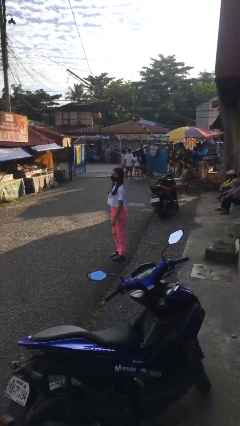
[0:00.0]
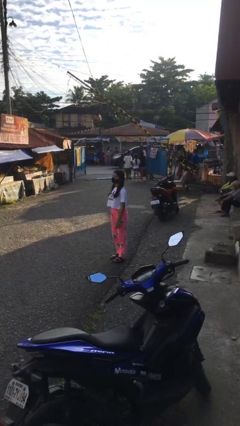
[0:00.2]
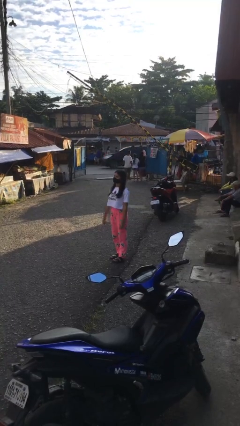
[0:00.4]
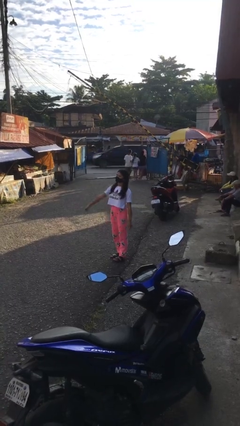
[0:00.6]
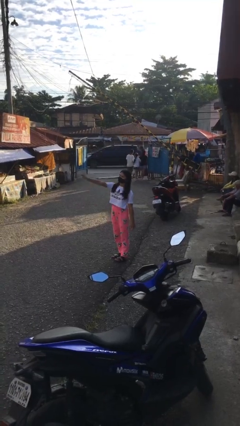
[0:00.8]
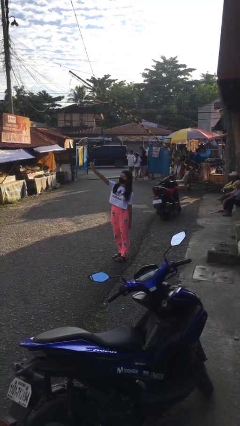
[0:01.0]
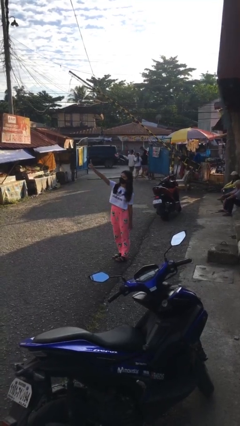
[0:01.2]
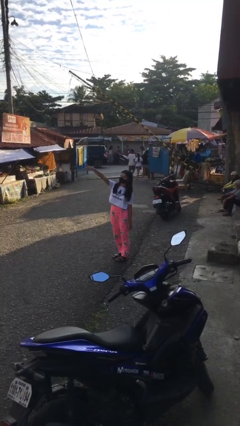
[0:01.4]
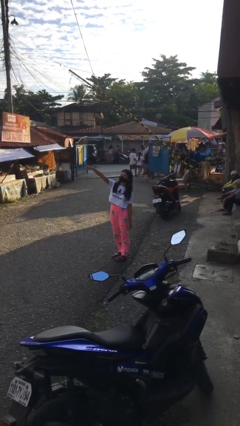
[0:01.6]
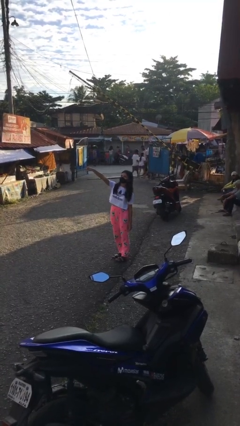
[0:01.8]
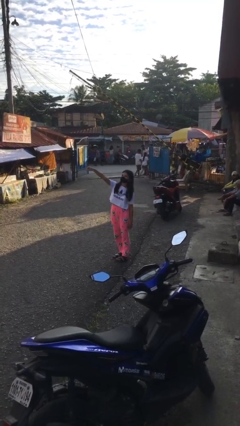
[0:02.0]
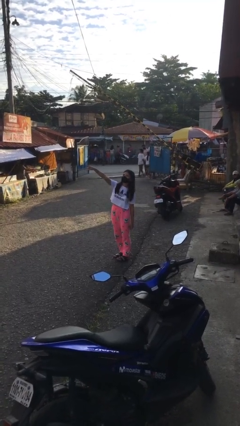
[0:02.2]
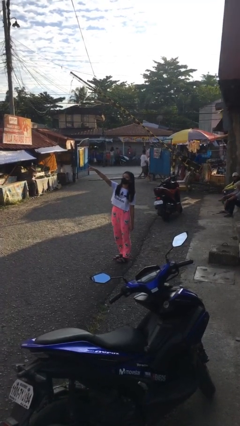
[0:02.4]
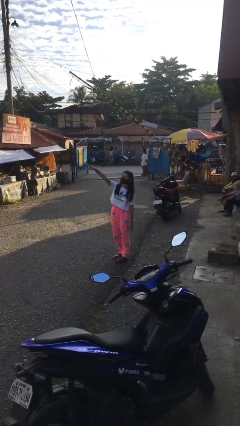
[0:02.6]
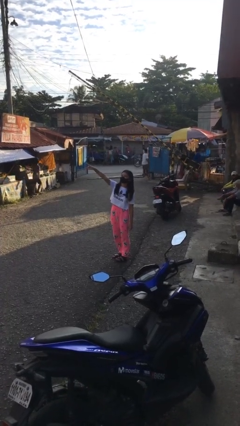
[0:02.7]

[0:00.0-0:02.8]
person points at person

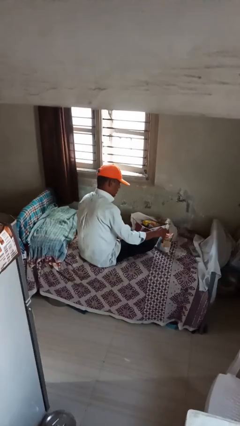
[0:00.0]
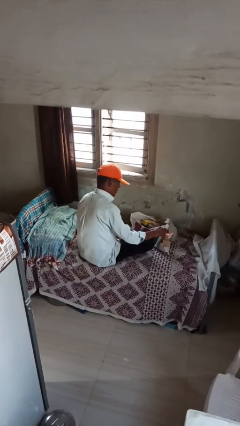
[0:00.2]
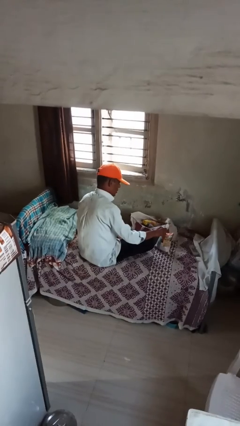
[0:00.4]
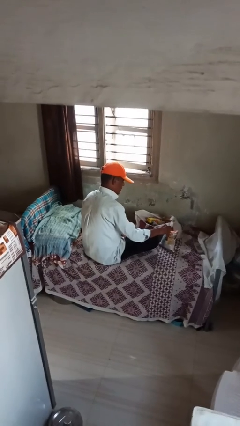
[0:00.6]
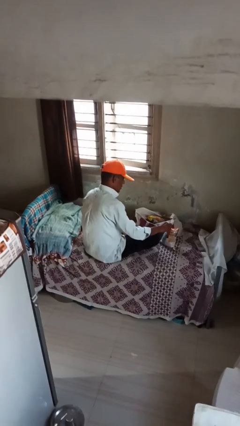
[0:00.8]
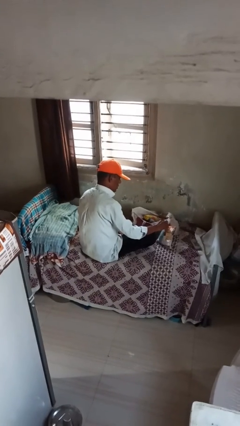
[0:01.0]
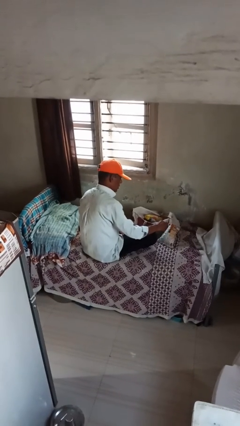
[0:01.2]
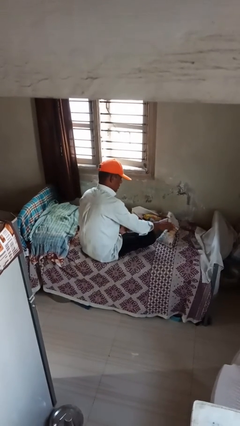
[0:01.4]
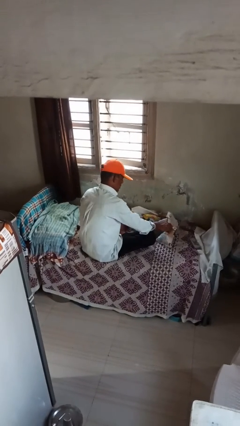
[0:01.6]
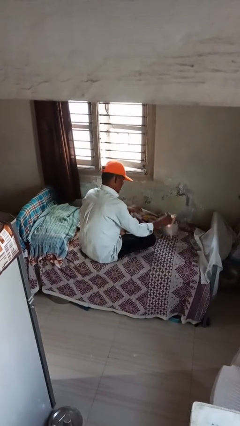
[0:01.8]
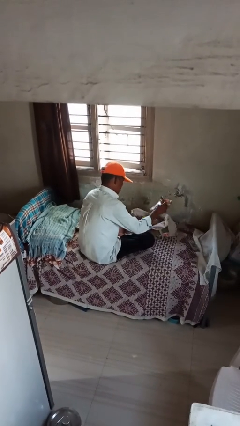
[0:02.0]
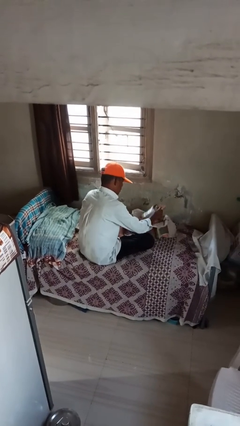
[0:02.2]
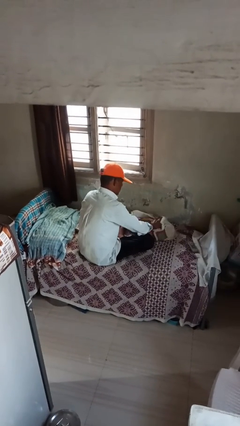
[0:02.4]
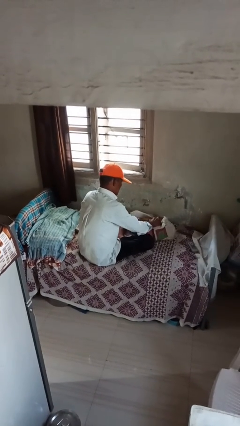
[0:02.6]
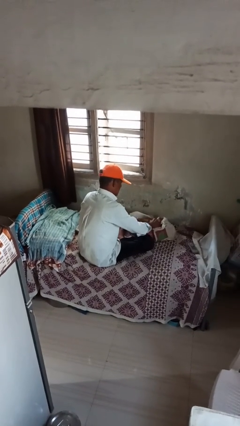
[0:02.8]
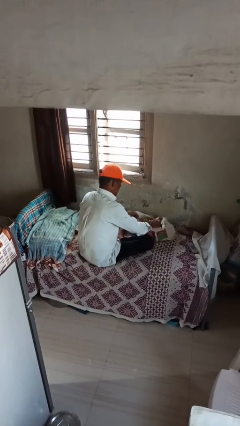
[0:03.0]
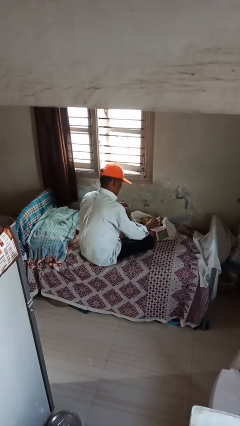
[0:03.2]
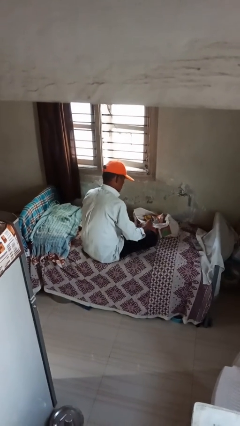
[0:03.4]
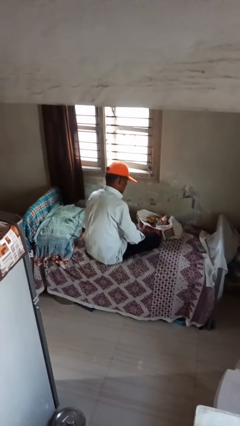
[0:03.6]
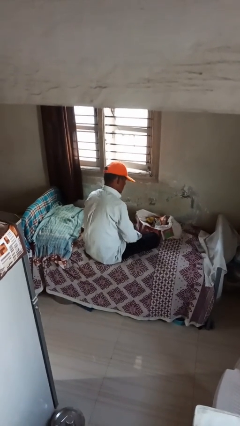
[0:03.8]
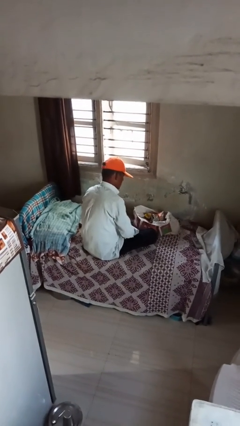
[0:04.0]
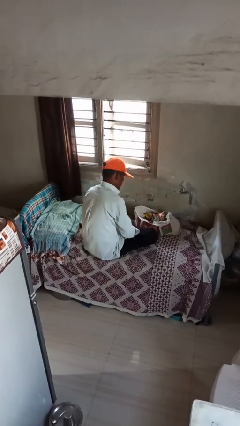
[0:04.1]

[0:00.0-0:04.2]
person puts object into bag

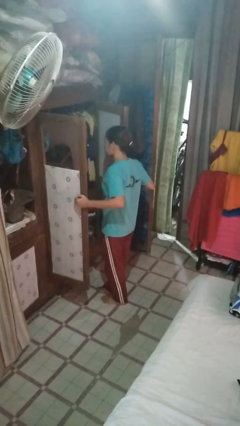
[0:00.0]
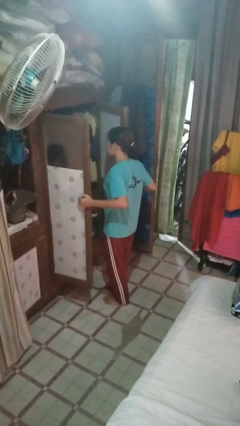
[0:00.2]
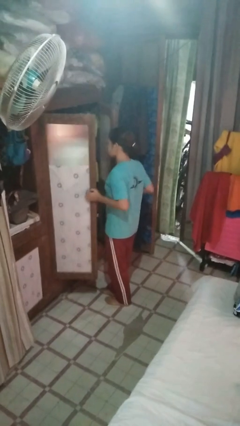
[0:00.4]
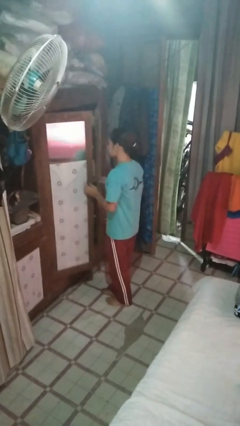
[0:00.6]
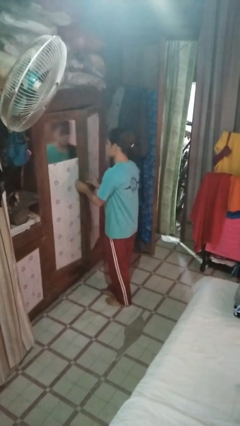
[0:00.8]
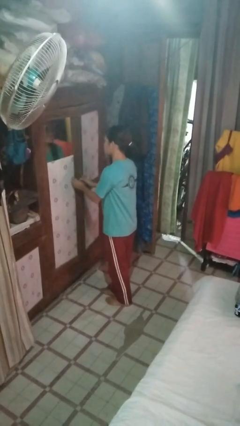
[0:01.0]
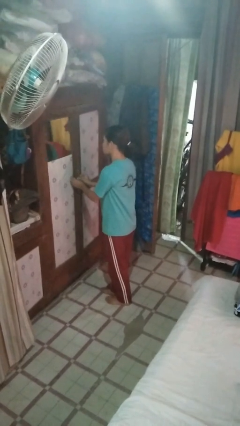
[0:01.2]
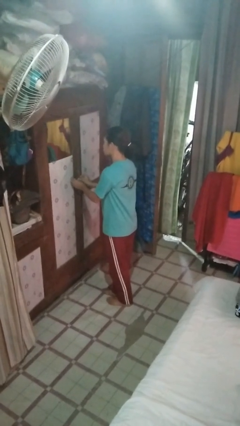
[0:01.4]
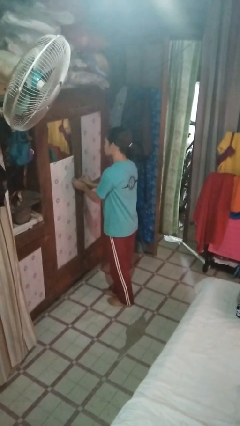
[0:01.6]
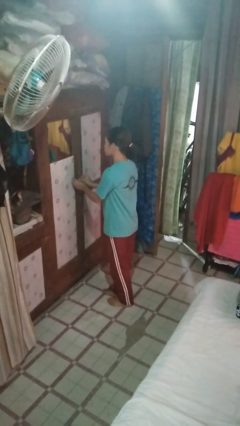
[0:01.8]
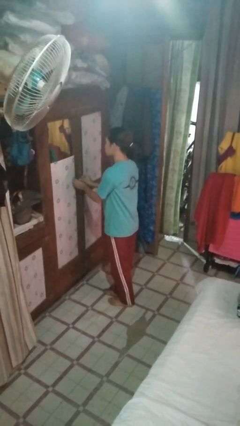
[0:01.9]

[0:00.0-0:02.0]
person closes closet door

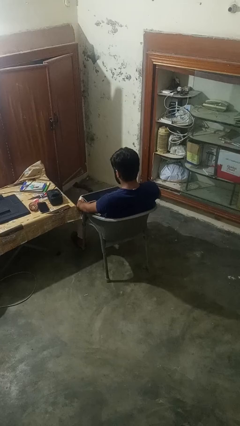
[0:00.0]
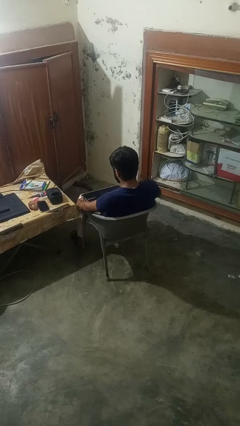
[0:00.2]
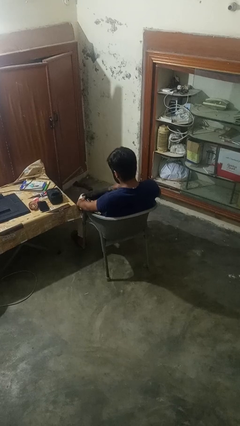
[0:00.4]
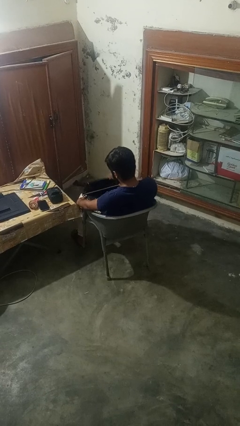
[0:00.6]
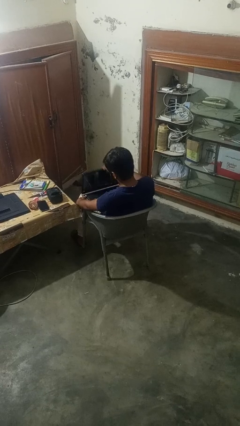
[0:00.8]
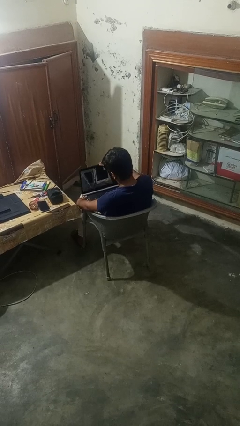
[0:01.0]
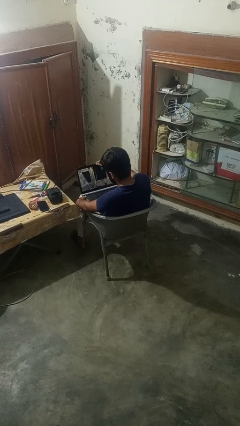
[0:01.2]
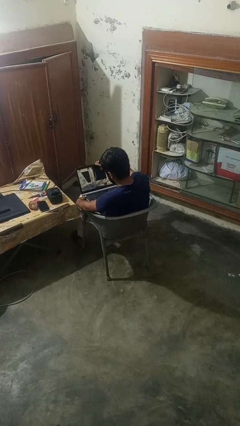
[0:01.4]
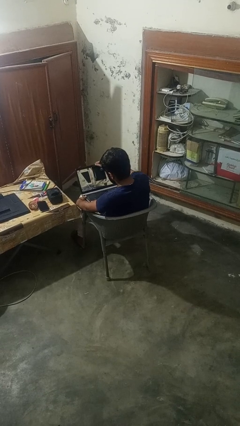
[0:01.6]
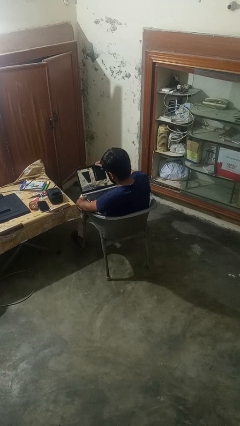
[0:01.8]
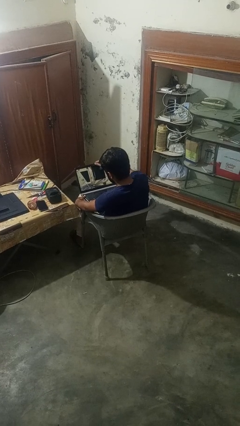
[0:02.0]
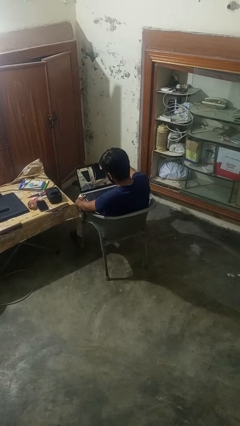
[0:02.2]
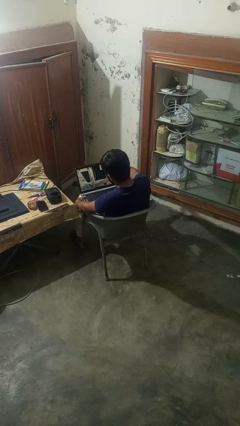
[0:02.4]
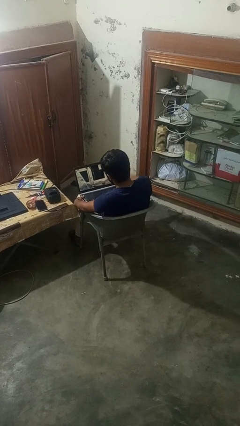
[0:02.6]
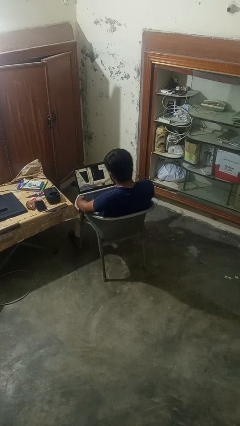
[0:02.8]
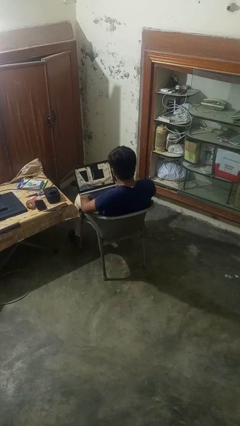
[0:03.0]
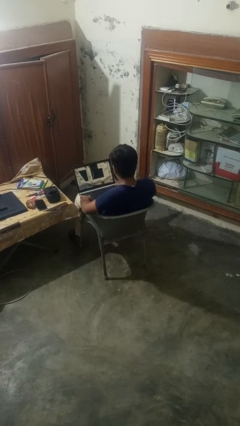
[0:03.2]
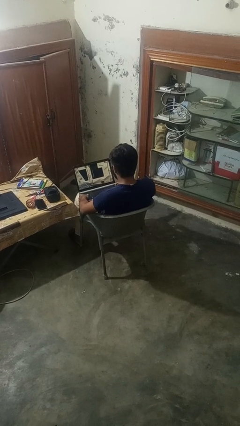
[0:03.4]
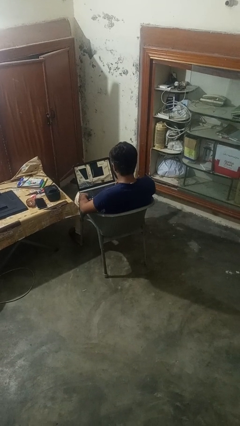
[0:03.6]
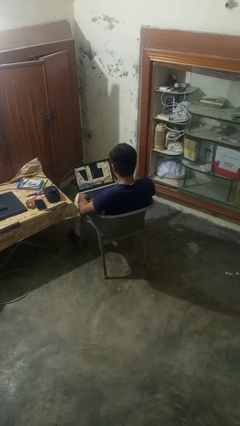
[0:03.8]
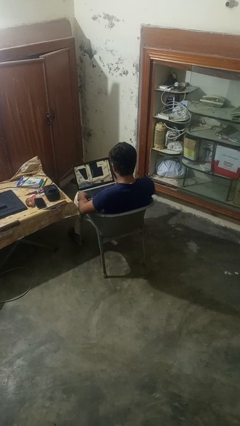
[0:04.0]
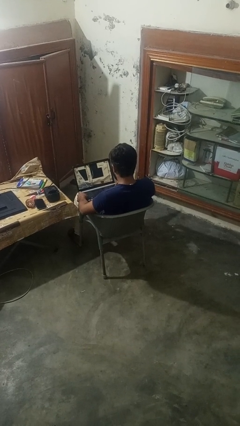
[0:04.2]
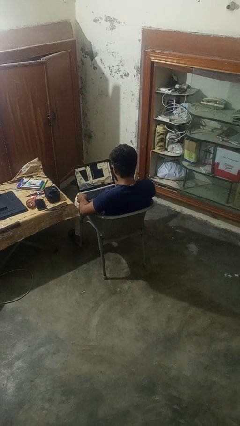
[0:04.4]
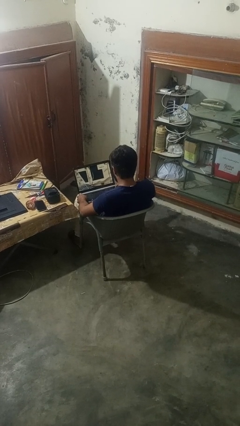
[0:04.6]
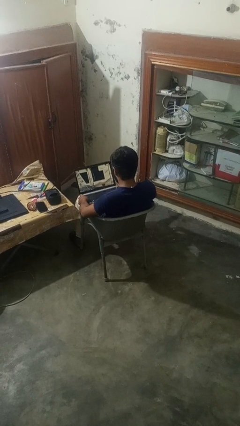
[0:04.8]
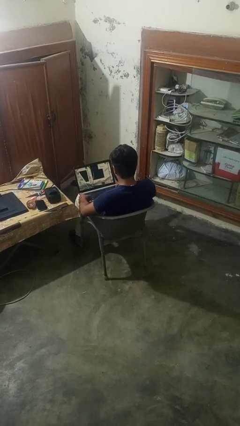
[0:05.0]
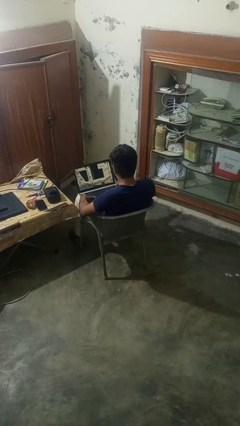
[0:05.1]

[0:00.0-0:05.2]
person opens laptop

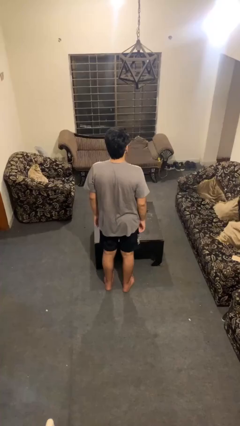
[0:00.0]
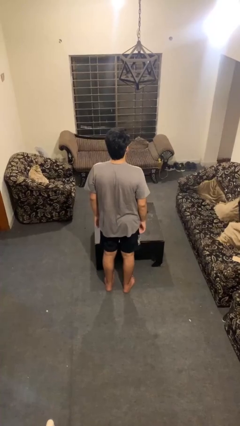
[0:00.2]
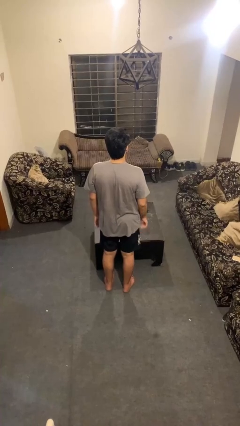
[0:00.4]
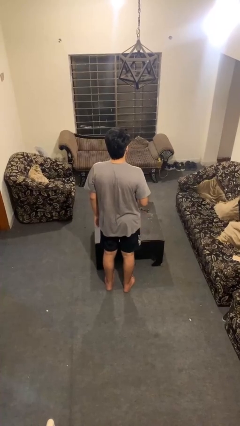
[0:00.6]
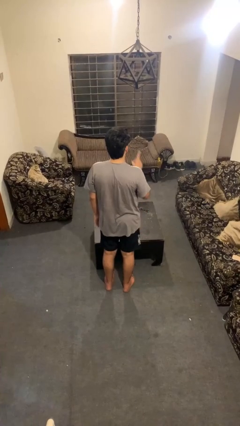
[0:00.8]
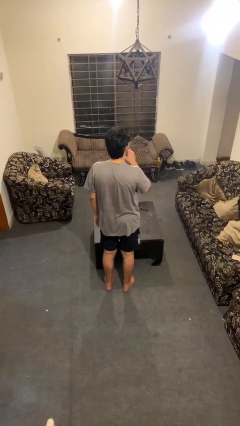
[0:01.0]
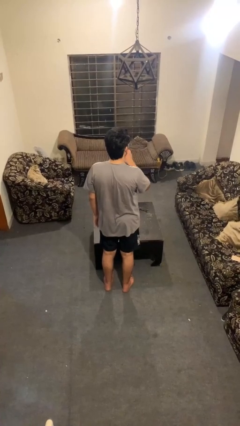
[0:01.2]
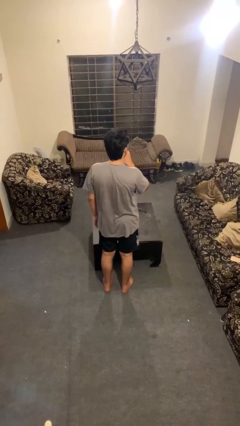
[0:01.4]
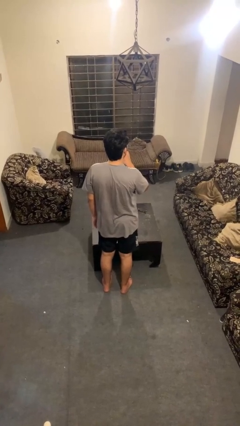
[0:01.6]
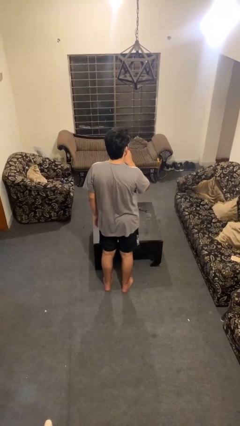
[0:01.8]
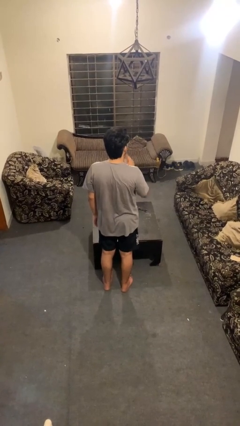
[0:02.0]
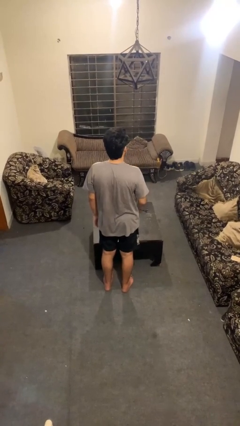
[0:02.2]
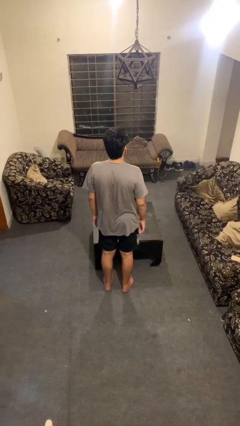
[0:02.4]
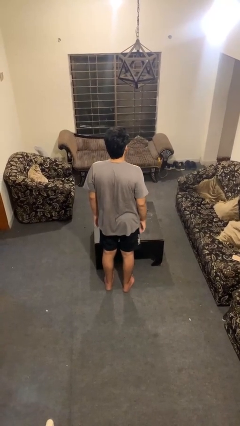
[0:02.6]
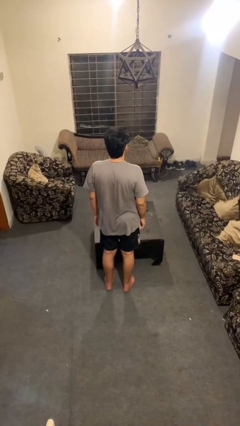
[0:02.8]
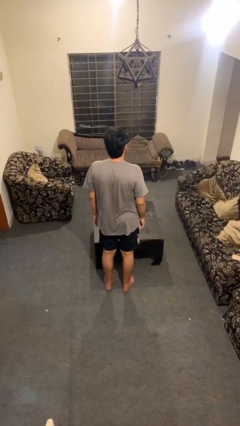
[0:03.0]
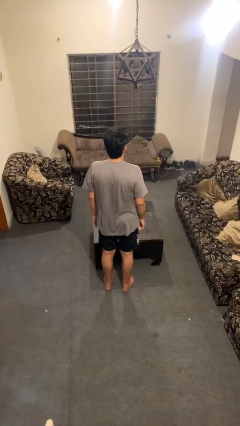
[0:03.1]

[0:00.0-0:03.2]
person gestures be quiet
